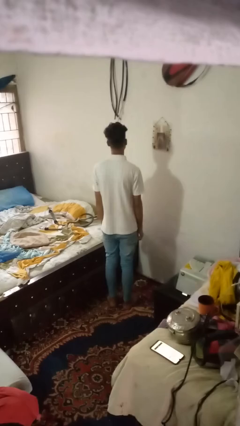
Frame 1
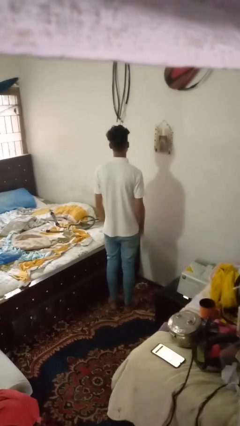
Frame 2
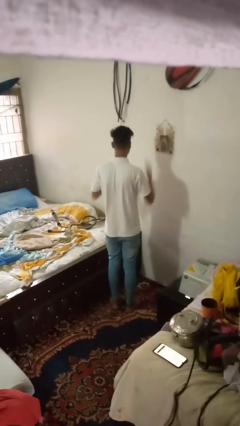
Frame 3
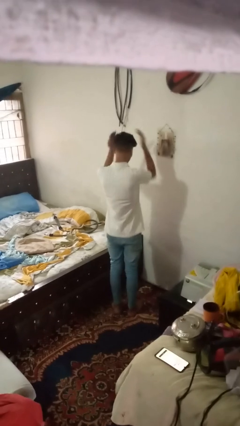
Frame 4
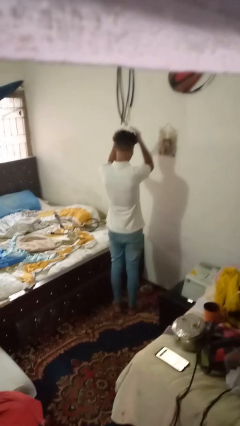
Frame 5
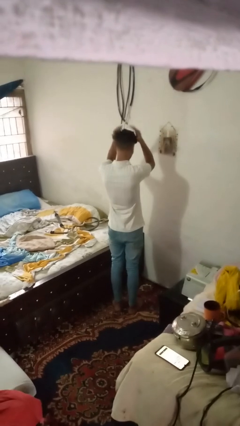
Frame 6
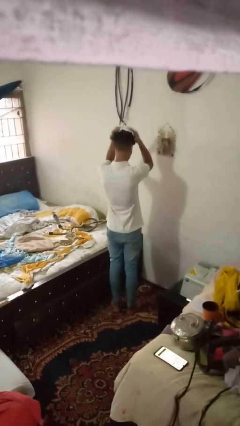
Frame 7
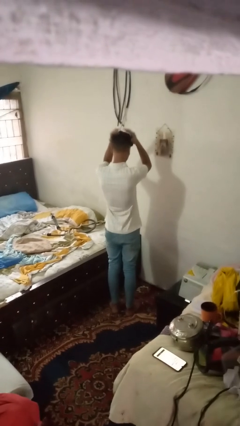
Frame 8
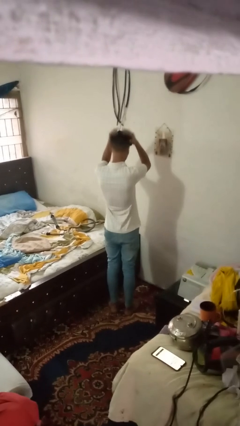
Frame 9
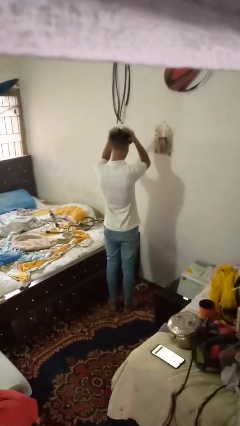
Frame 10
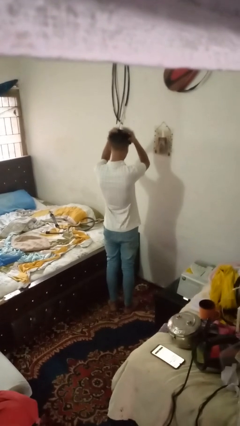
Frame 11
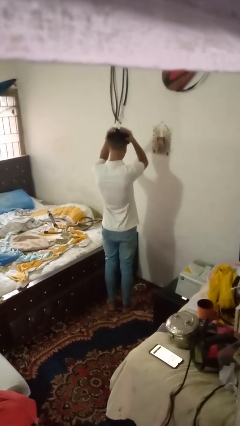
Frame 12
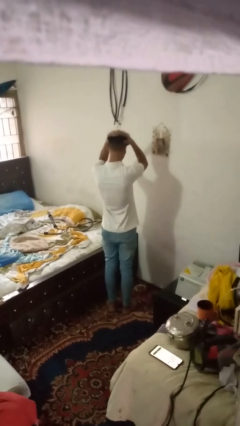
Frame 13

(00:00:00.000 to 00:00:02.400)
person pats head

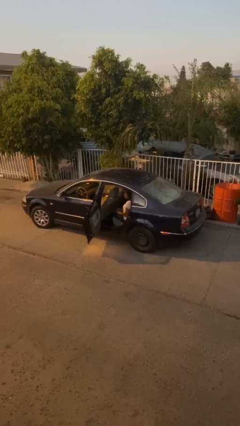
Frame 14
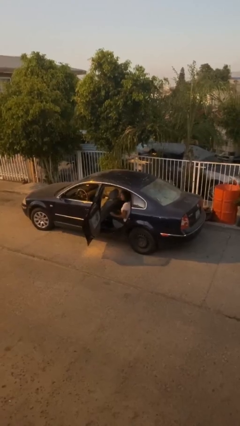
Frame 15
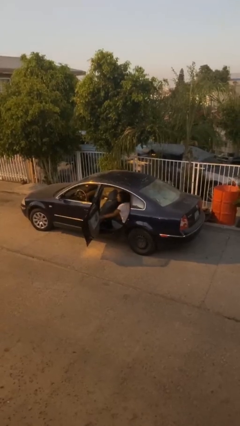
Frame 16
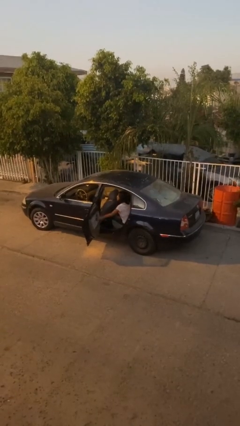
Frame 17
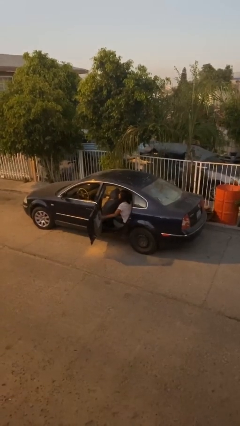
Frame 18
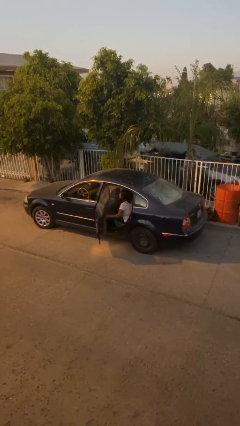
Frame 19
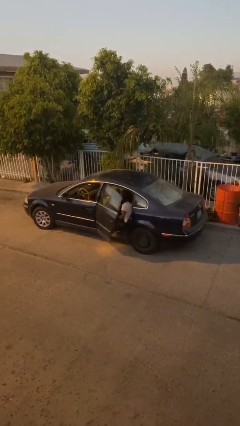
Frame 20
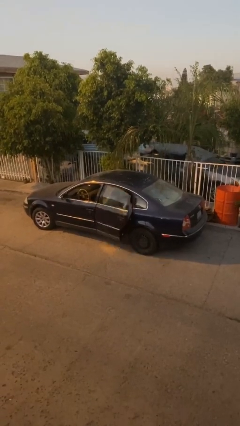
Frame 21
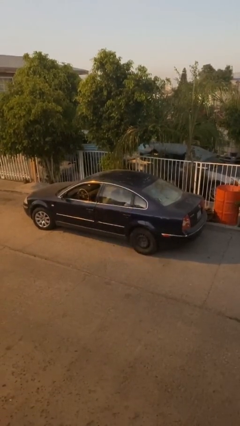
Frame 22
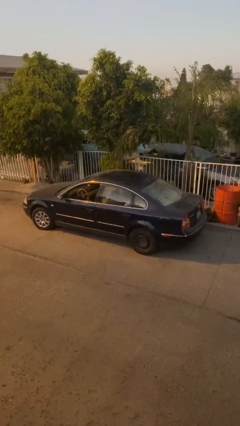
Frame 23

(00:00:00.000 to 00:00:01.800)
person closes car door

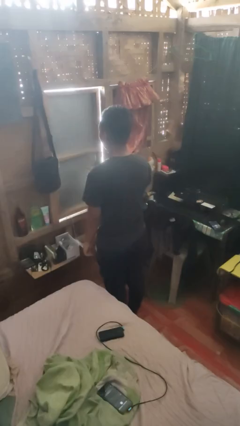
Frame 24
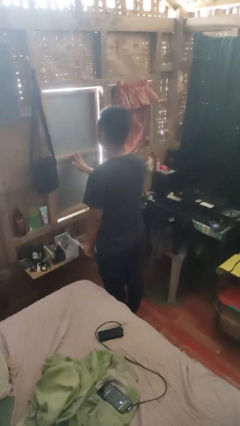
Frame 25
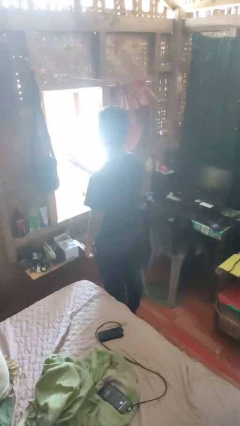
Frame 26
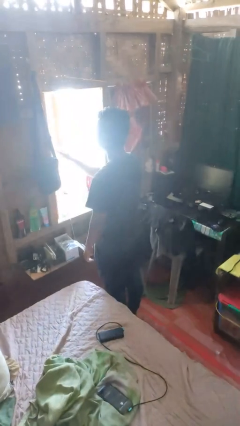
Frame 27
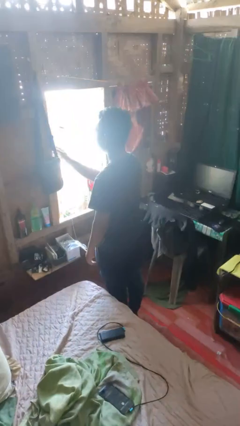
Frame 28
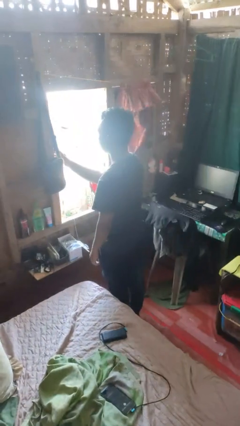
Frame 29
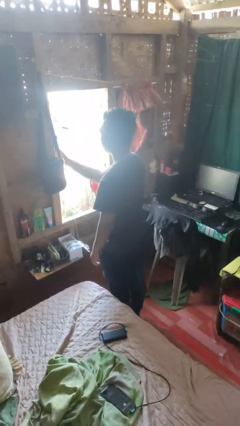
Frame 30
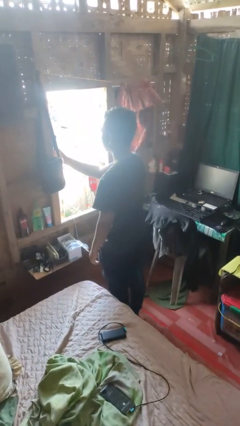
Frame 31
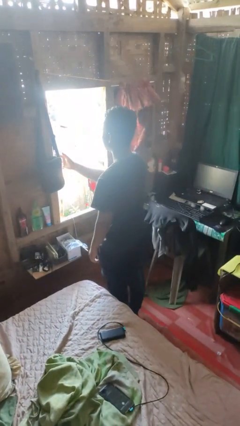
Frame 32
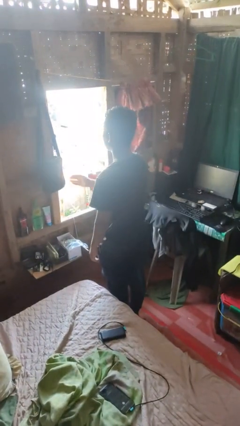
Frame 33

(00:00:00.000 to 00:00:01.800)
person opens home window

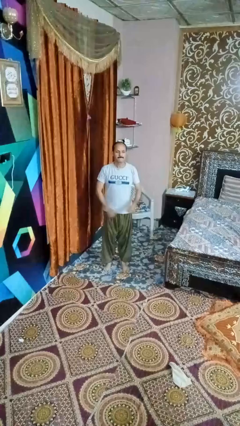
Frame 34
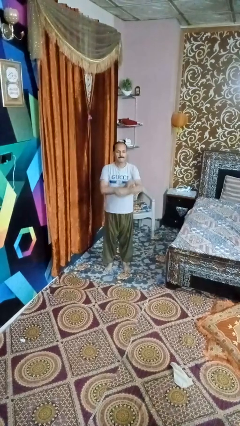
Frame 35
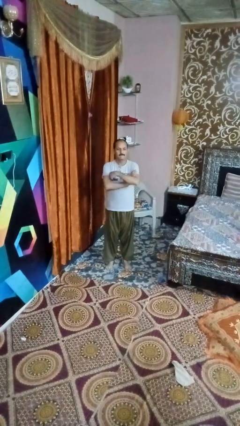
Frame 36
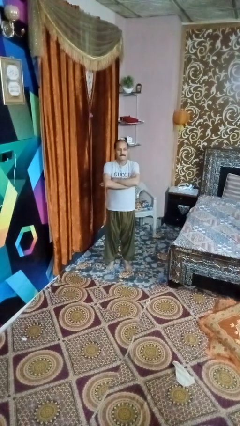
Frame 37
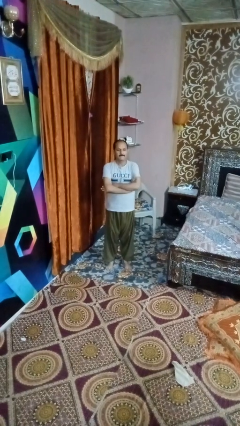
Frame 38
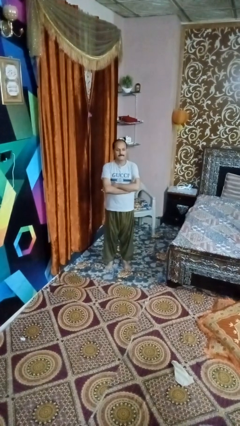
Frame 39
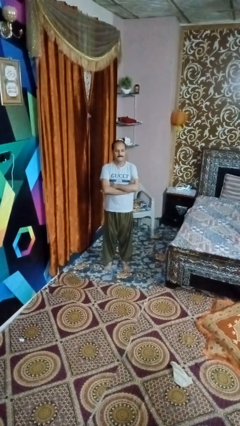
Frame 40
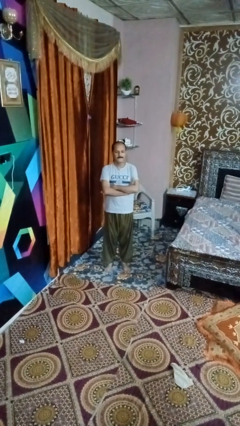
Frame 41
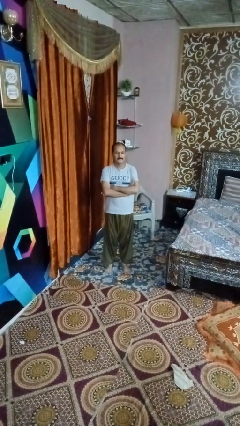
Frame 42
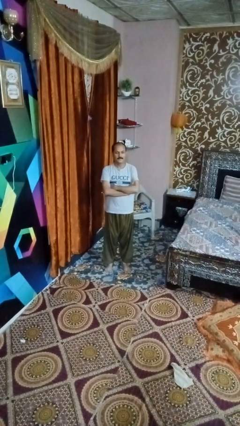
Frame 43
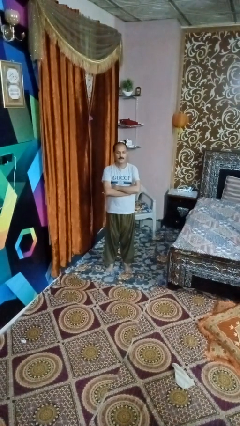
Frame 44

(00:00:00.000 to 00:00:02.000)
person crosses arms

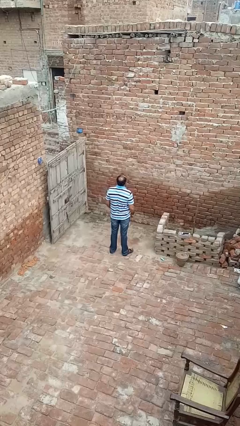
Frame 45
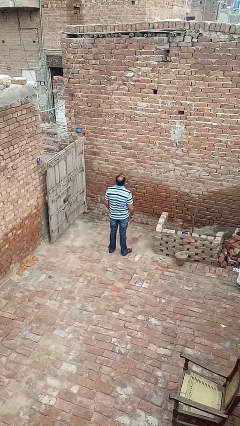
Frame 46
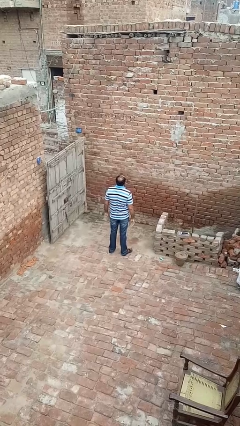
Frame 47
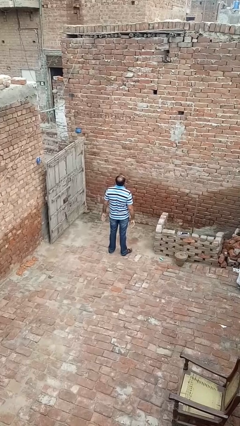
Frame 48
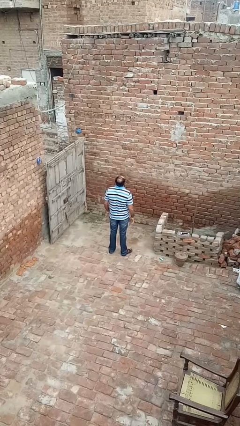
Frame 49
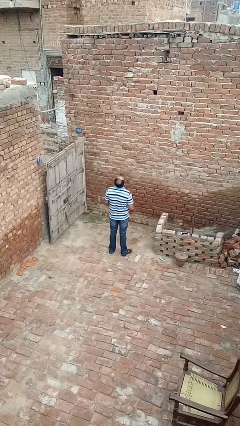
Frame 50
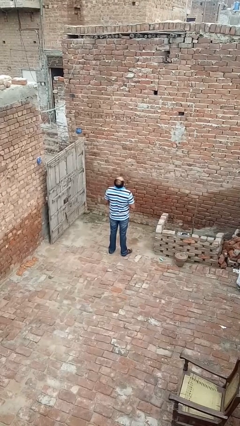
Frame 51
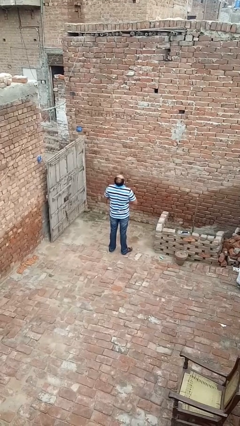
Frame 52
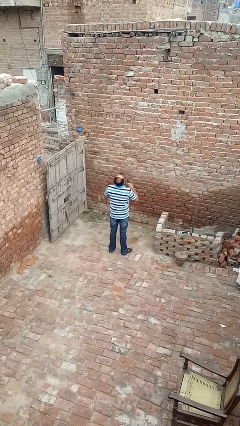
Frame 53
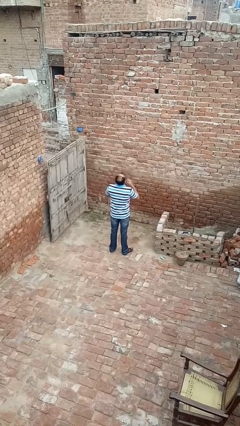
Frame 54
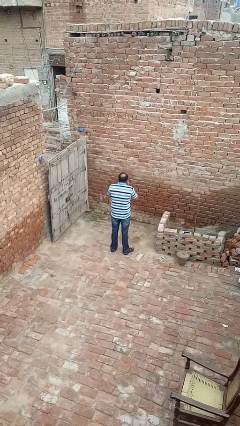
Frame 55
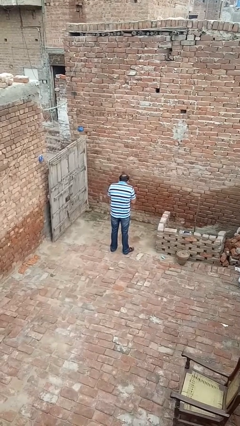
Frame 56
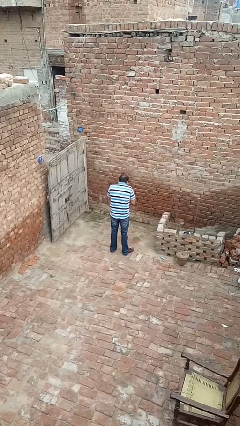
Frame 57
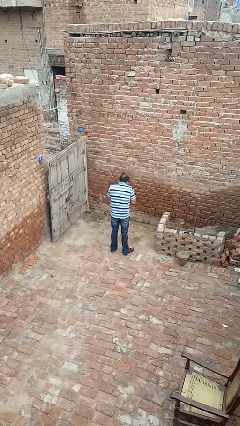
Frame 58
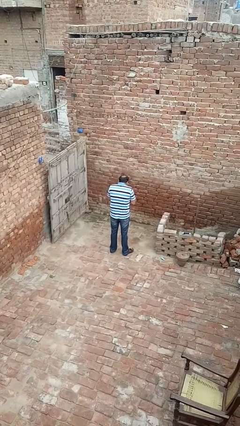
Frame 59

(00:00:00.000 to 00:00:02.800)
person sneezes into hand

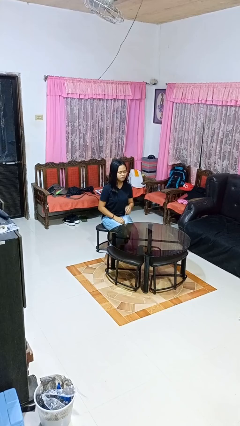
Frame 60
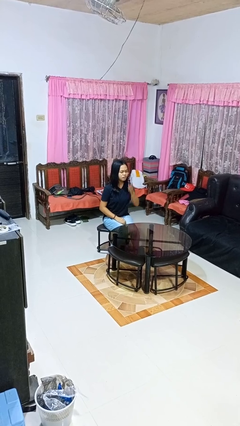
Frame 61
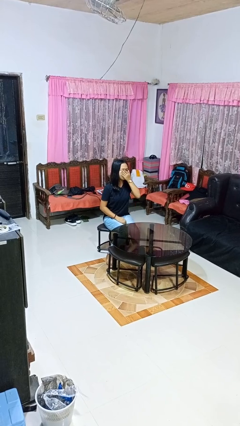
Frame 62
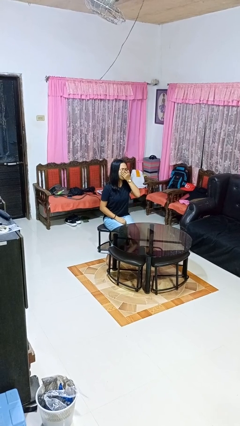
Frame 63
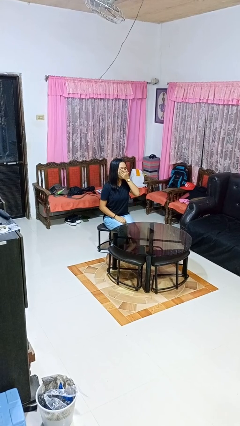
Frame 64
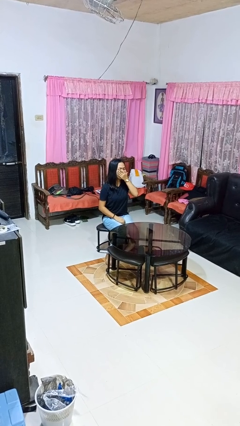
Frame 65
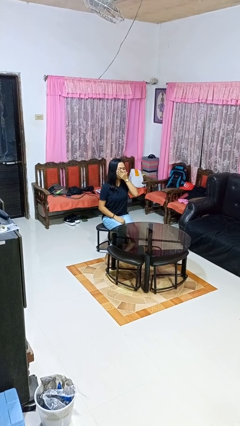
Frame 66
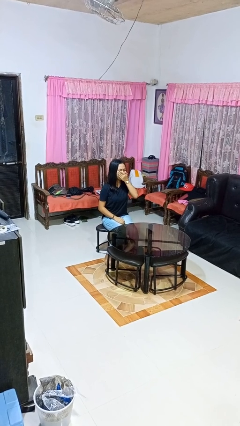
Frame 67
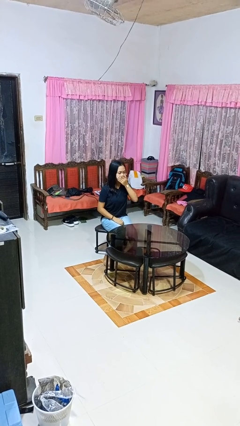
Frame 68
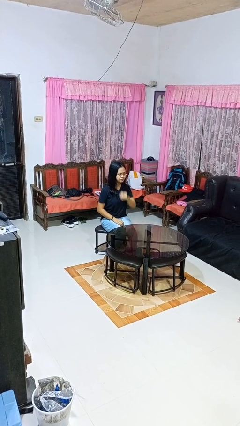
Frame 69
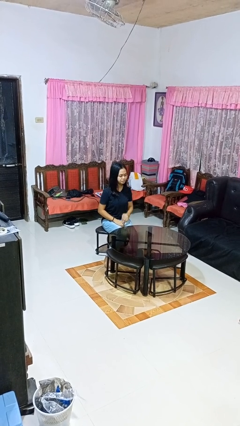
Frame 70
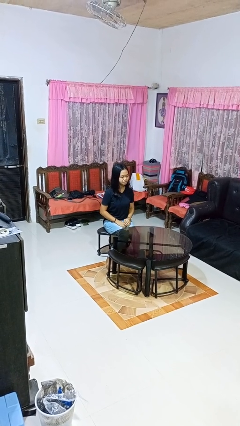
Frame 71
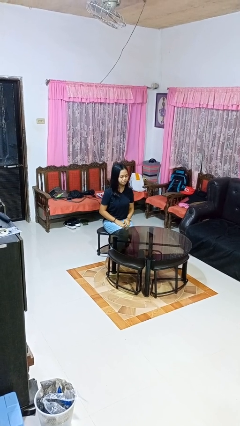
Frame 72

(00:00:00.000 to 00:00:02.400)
person yawns

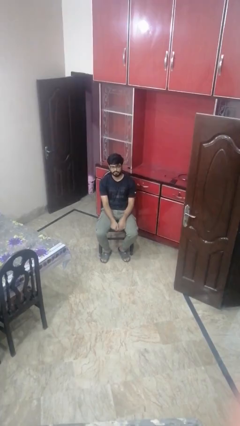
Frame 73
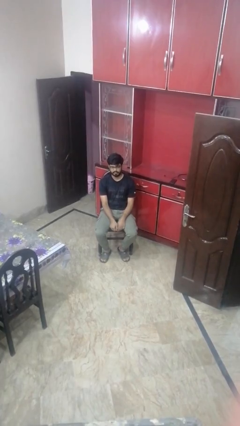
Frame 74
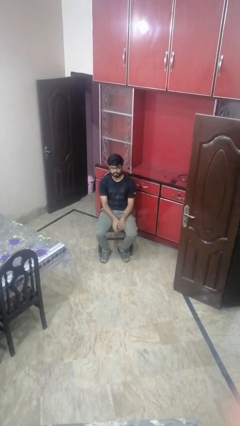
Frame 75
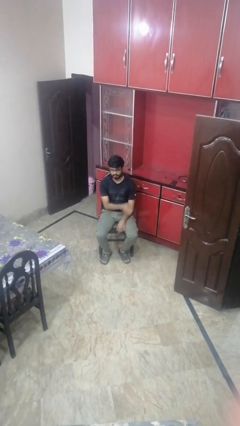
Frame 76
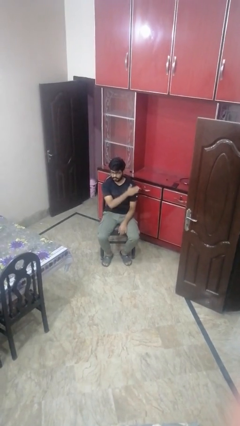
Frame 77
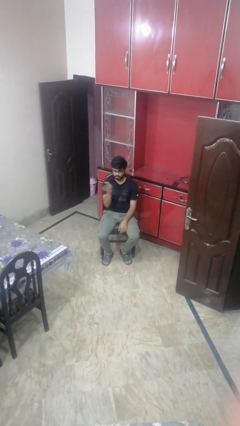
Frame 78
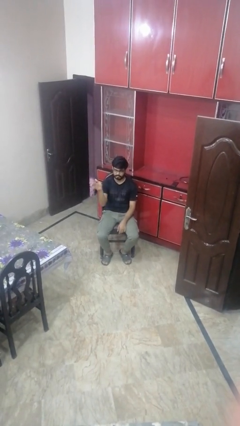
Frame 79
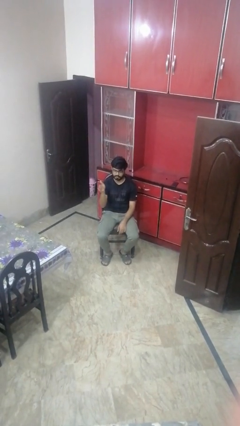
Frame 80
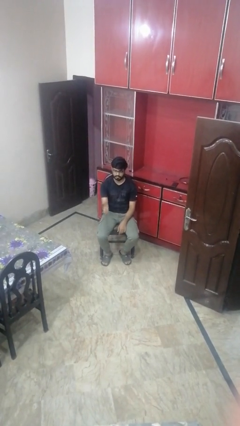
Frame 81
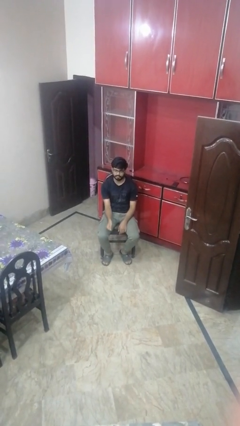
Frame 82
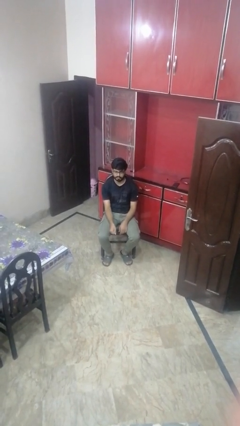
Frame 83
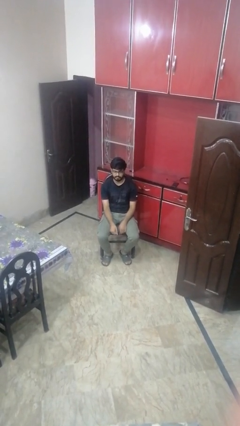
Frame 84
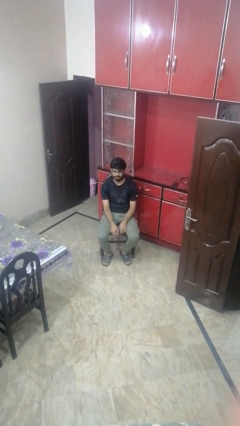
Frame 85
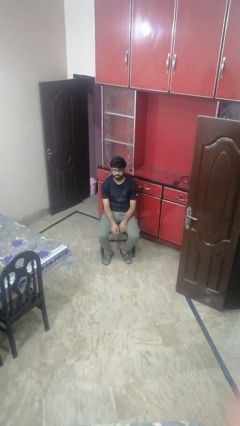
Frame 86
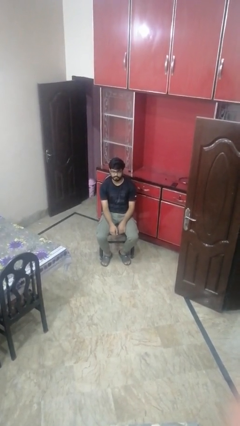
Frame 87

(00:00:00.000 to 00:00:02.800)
person gestures swipe right

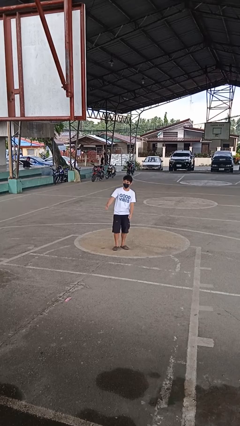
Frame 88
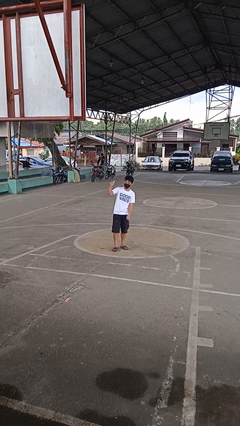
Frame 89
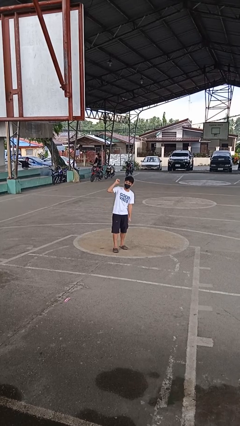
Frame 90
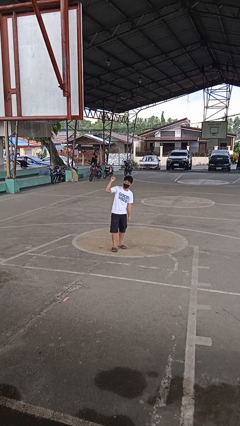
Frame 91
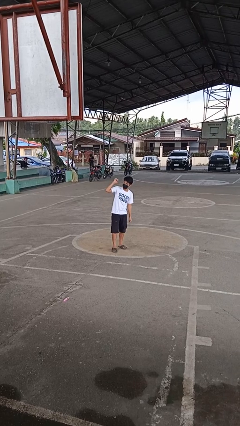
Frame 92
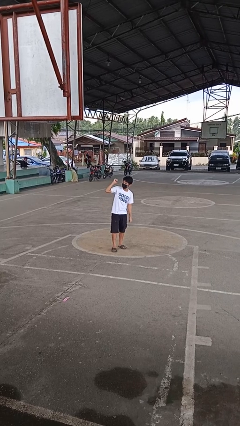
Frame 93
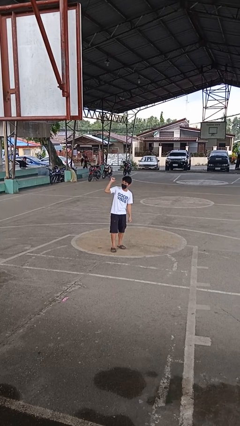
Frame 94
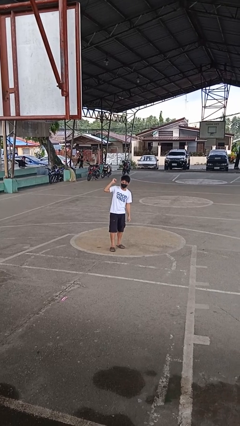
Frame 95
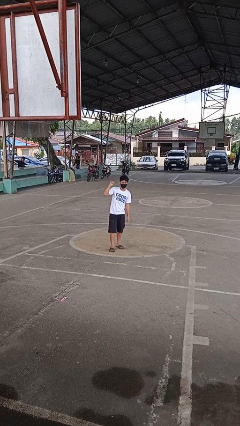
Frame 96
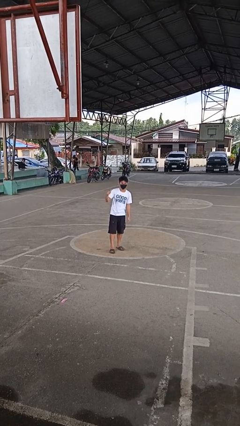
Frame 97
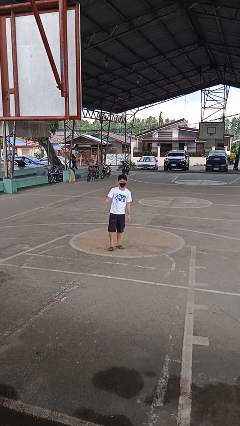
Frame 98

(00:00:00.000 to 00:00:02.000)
person gestures behind me
